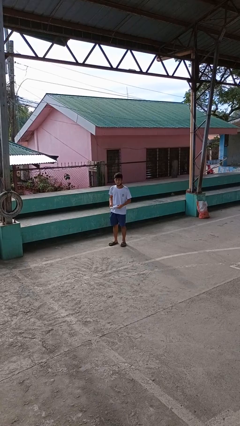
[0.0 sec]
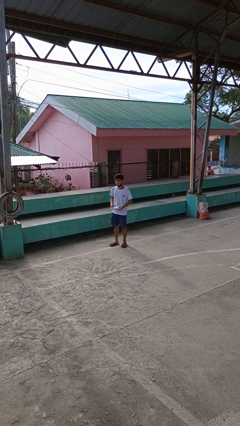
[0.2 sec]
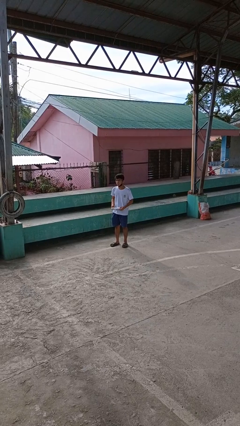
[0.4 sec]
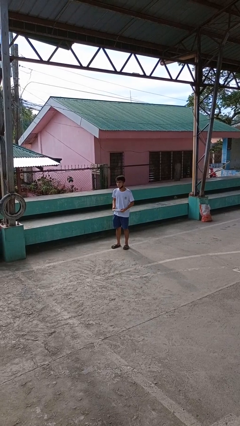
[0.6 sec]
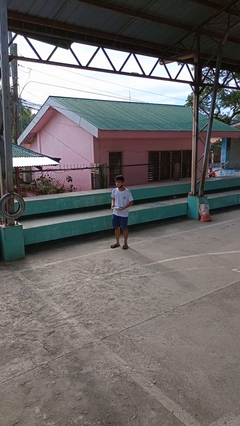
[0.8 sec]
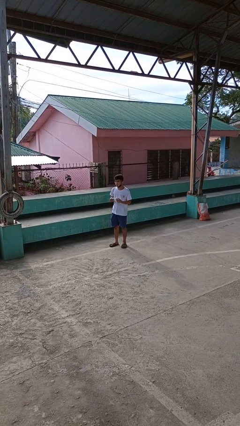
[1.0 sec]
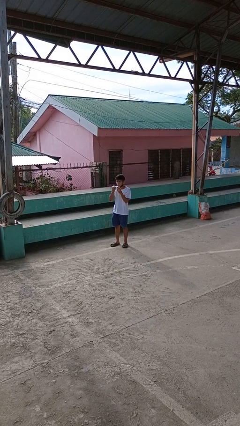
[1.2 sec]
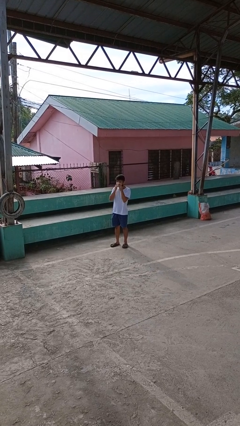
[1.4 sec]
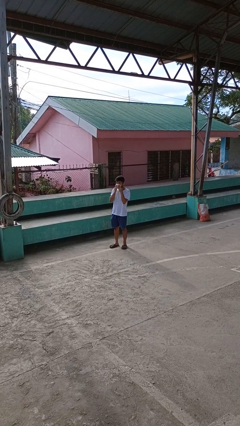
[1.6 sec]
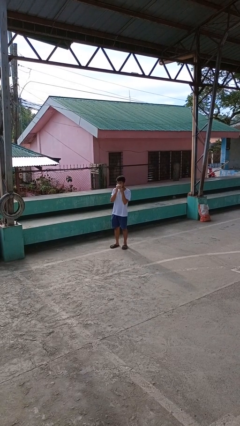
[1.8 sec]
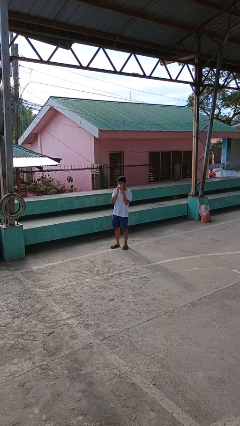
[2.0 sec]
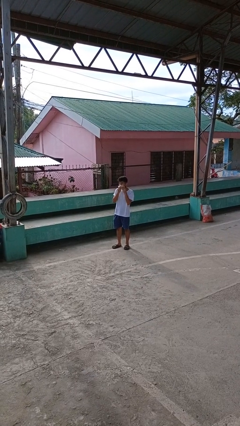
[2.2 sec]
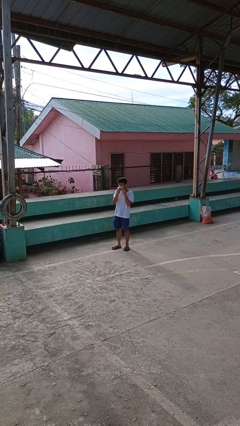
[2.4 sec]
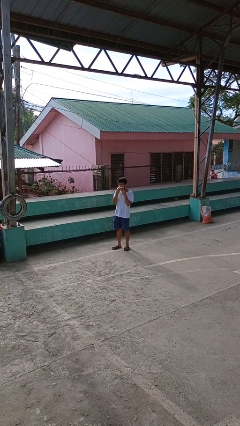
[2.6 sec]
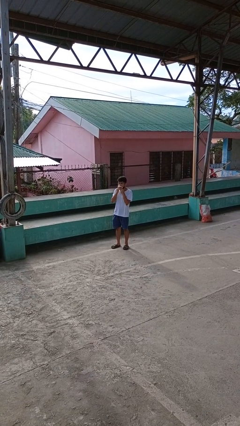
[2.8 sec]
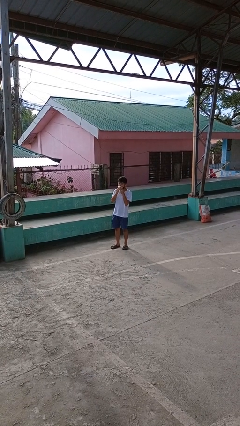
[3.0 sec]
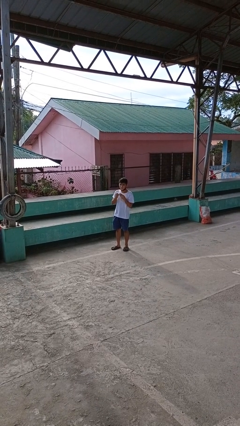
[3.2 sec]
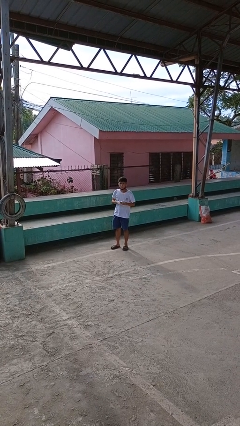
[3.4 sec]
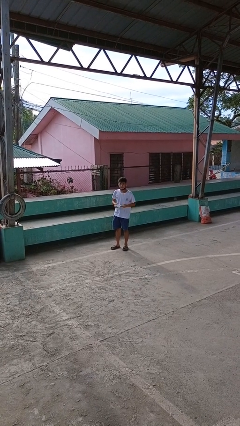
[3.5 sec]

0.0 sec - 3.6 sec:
person wipes mouth with napkin

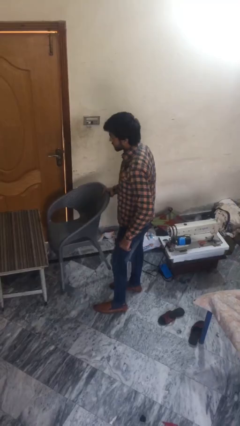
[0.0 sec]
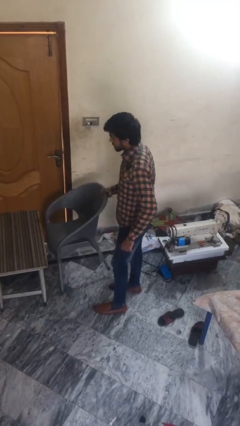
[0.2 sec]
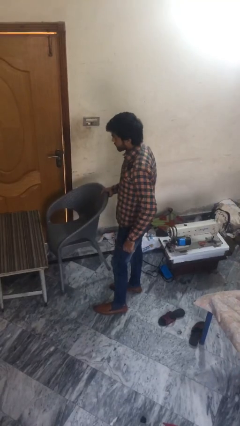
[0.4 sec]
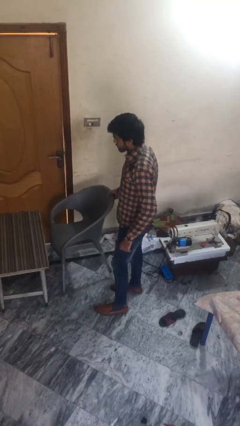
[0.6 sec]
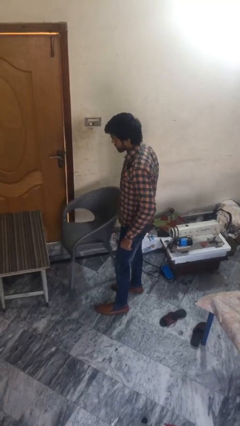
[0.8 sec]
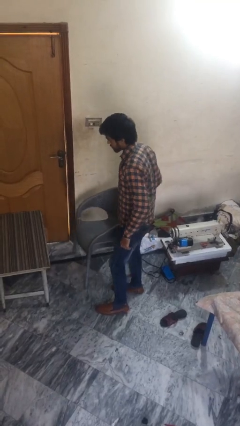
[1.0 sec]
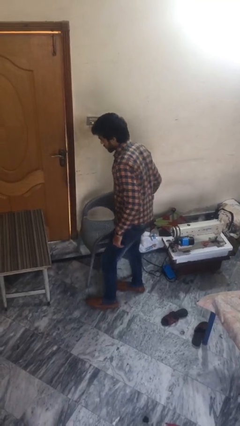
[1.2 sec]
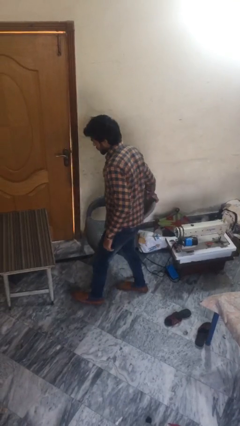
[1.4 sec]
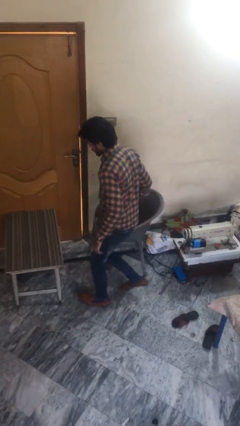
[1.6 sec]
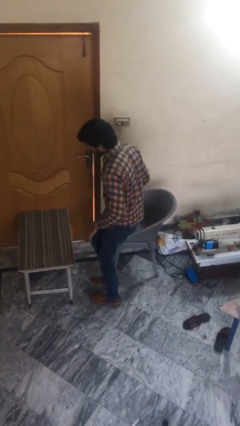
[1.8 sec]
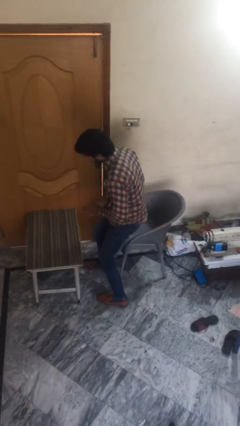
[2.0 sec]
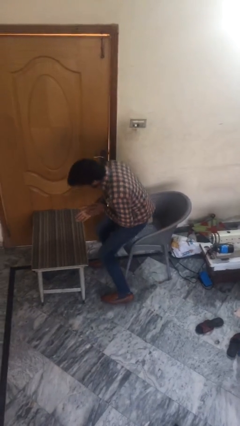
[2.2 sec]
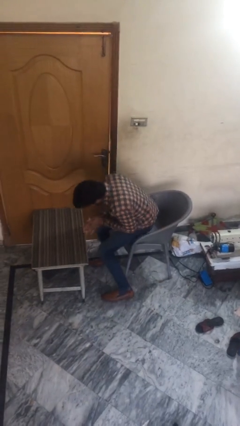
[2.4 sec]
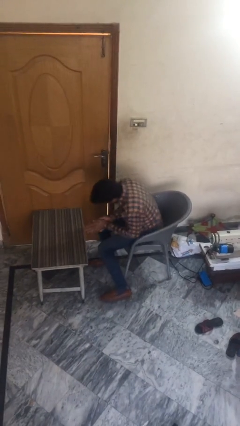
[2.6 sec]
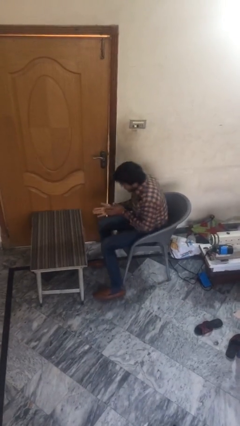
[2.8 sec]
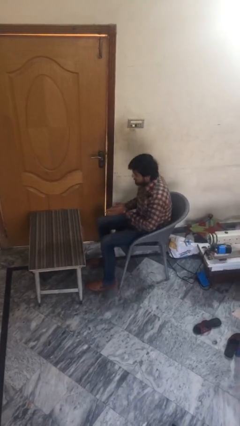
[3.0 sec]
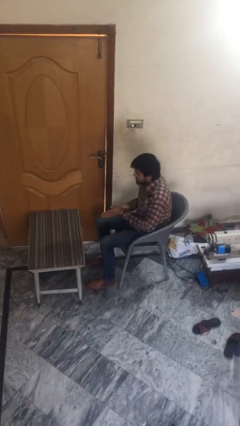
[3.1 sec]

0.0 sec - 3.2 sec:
person sits down

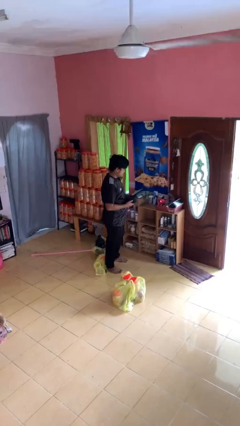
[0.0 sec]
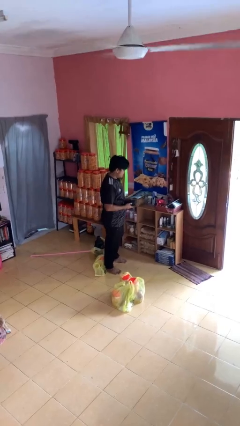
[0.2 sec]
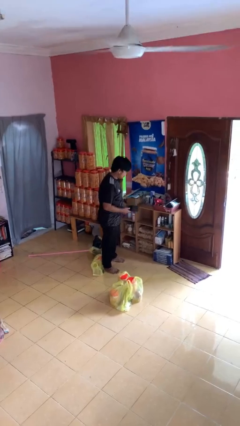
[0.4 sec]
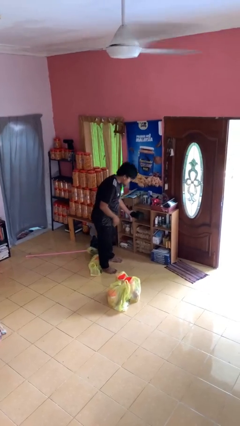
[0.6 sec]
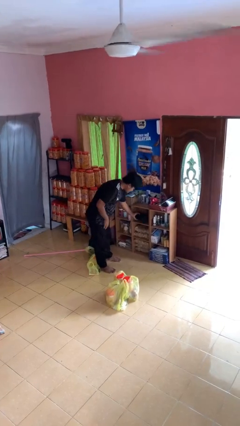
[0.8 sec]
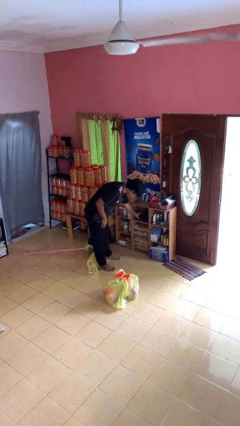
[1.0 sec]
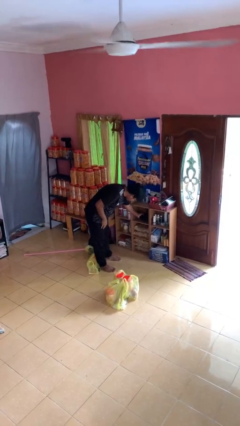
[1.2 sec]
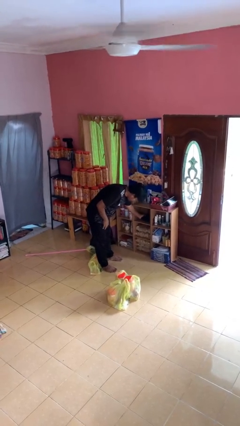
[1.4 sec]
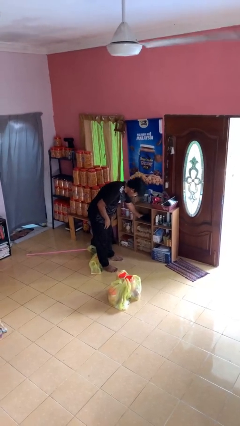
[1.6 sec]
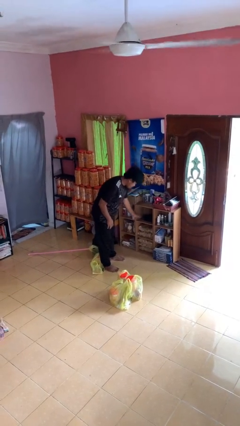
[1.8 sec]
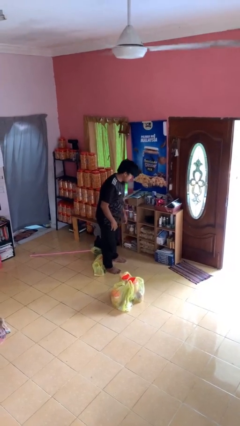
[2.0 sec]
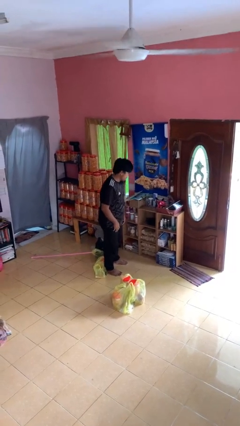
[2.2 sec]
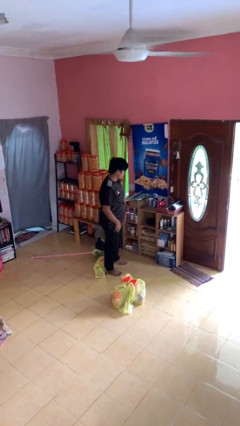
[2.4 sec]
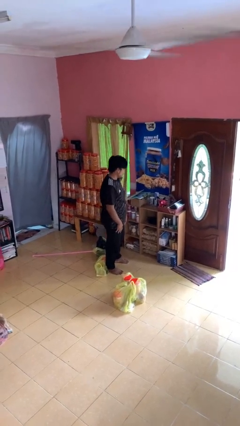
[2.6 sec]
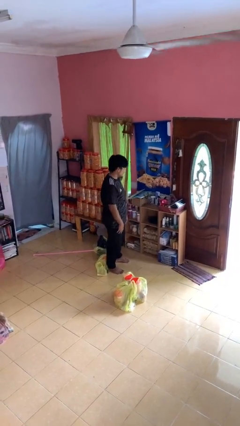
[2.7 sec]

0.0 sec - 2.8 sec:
person puts object in cabinet

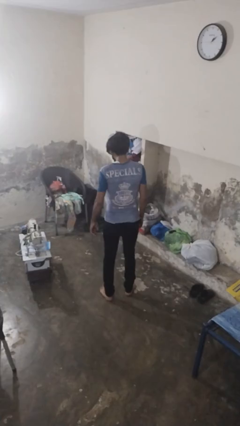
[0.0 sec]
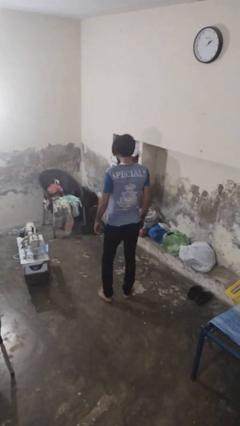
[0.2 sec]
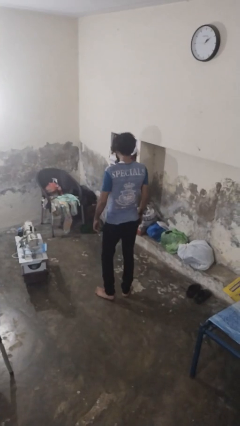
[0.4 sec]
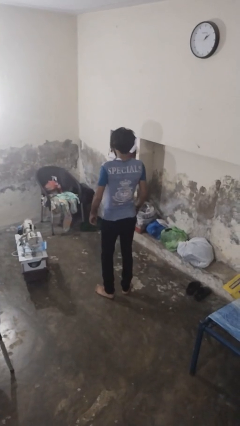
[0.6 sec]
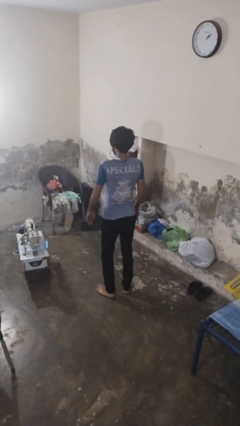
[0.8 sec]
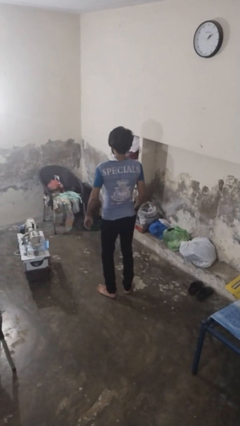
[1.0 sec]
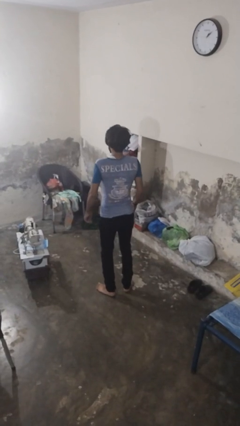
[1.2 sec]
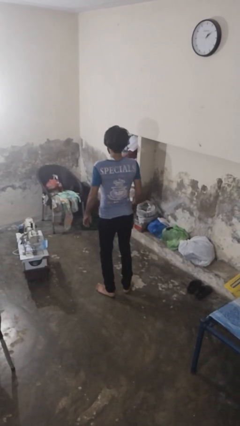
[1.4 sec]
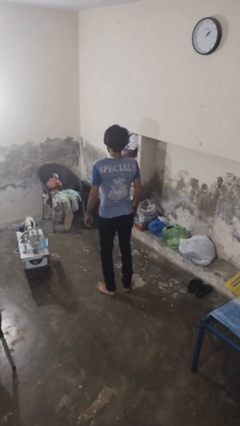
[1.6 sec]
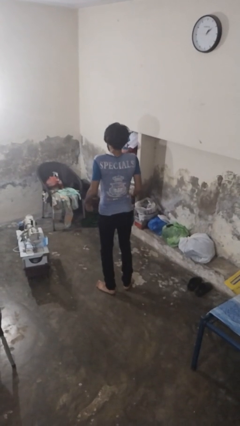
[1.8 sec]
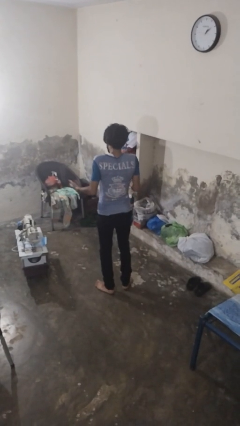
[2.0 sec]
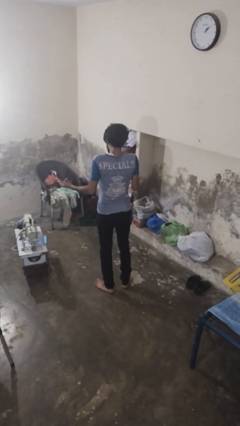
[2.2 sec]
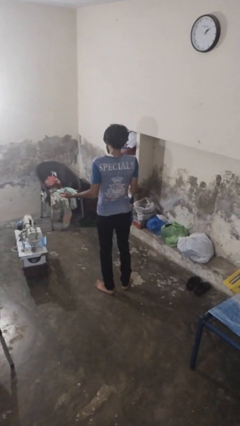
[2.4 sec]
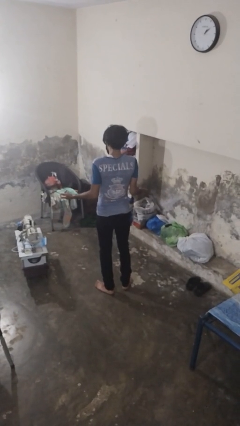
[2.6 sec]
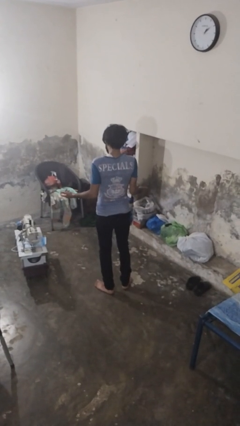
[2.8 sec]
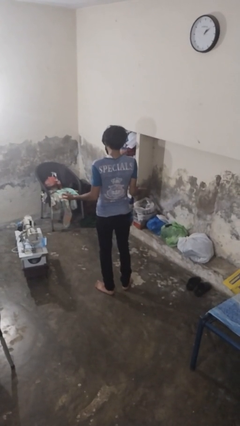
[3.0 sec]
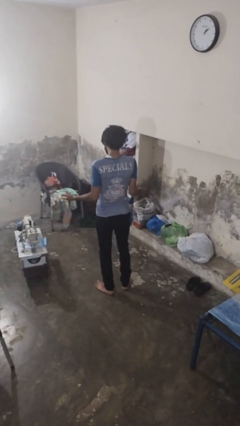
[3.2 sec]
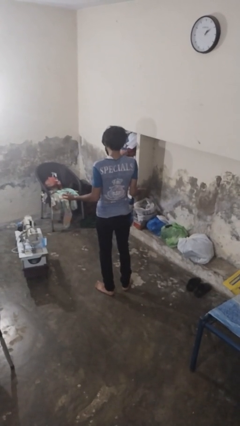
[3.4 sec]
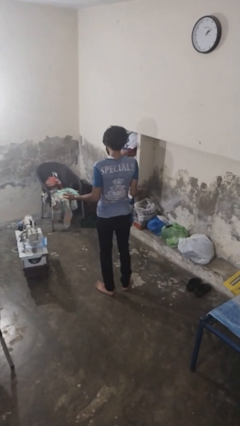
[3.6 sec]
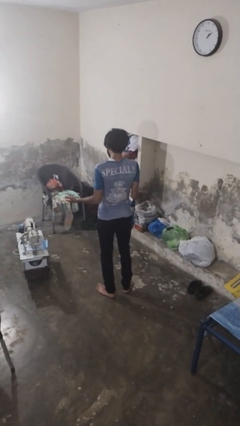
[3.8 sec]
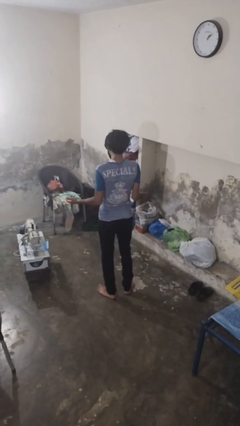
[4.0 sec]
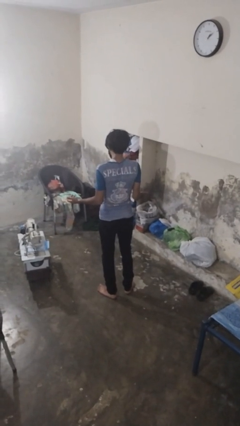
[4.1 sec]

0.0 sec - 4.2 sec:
person shrugs

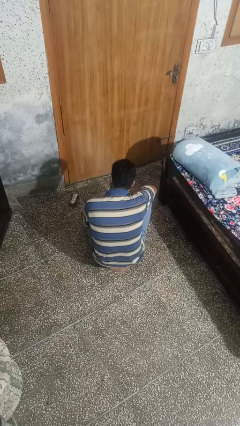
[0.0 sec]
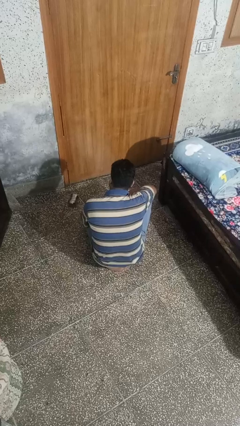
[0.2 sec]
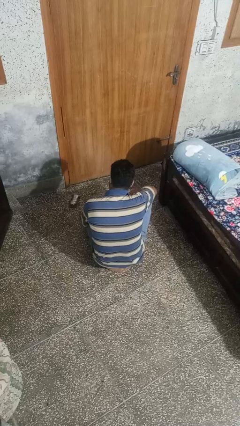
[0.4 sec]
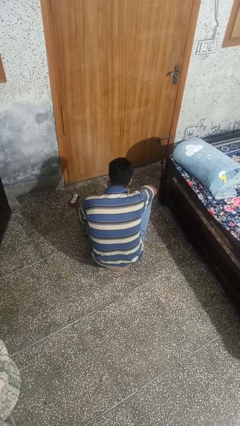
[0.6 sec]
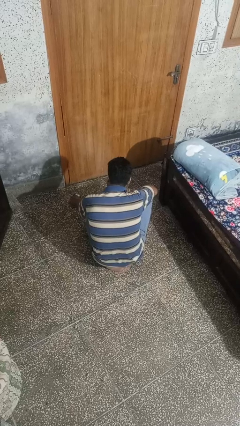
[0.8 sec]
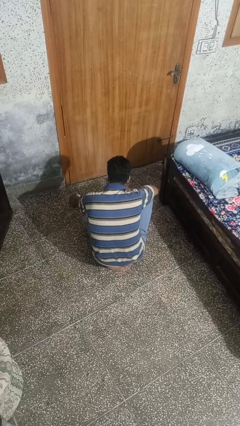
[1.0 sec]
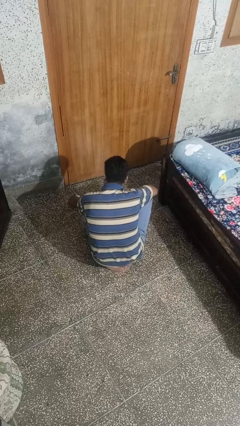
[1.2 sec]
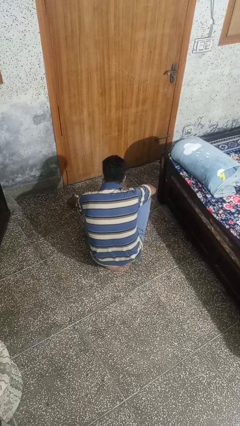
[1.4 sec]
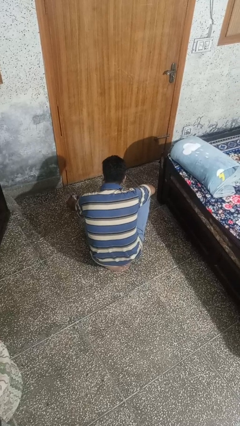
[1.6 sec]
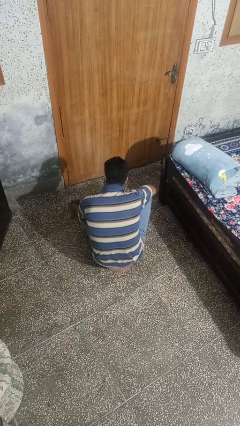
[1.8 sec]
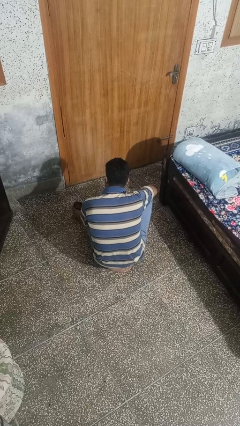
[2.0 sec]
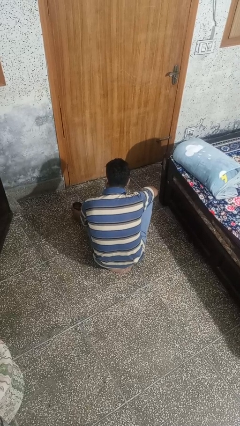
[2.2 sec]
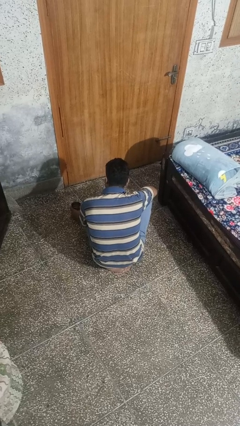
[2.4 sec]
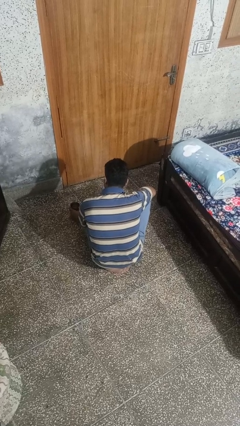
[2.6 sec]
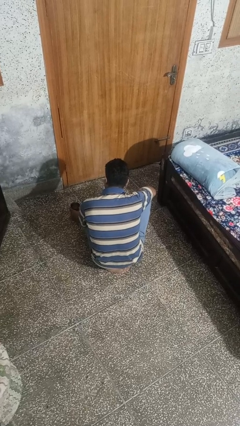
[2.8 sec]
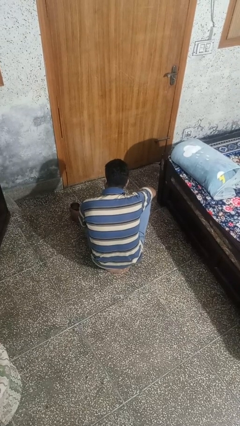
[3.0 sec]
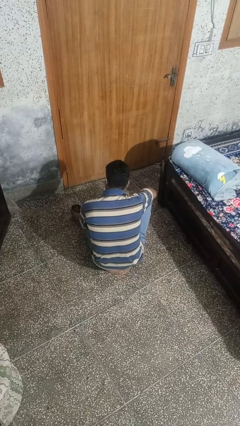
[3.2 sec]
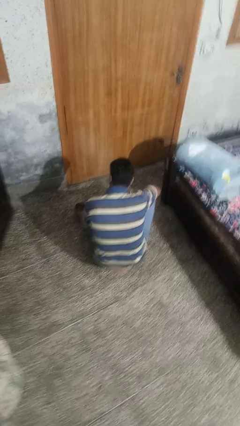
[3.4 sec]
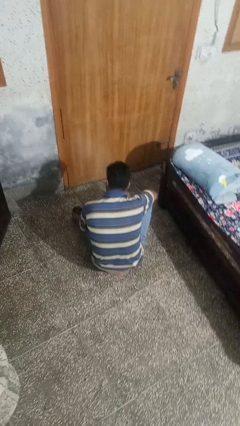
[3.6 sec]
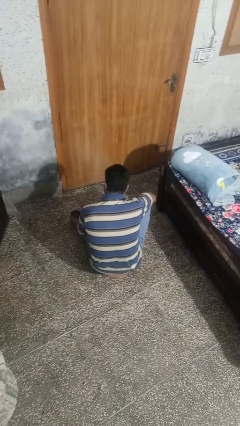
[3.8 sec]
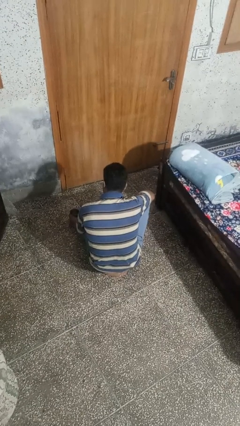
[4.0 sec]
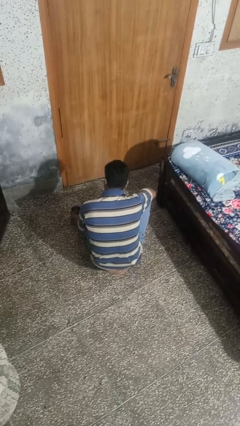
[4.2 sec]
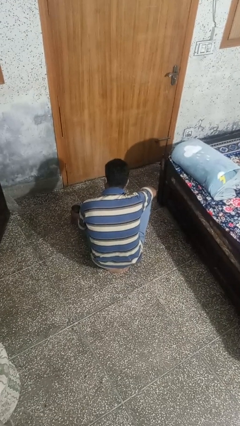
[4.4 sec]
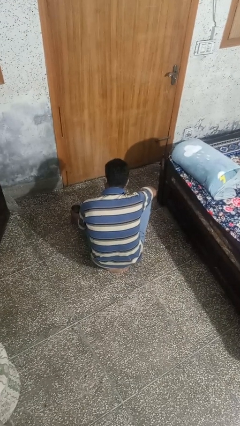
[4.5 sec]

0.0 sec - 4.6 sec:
person sets upright glass
